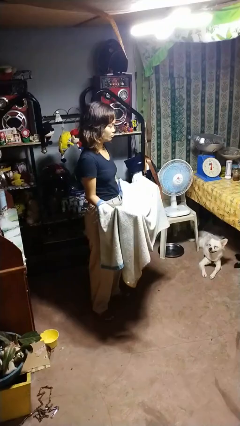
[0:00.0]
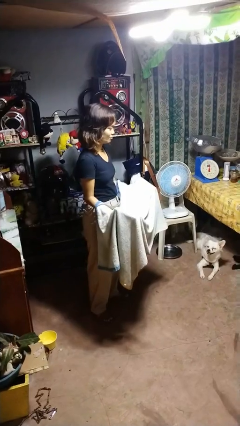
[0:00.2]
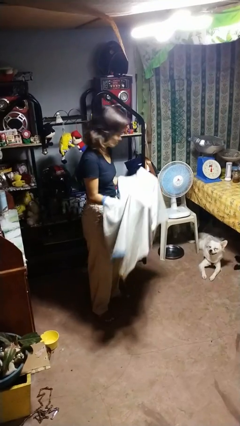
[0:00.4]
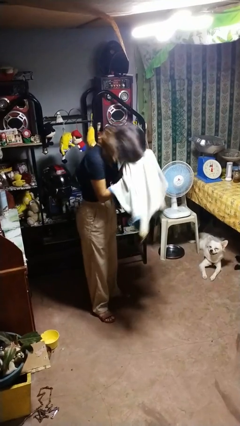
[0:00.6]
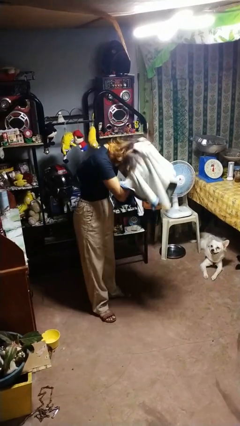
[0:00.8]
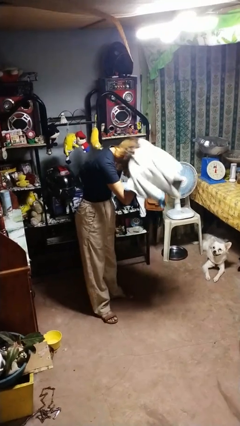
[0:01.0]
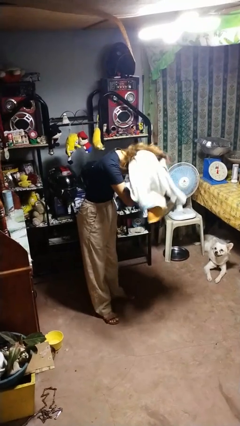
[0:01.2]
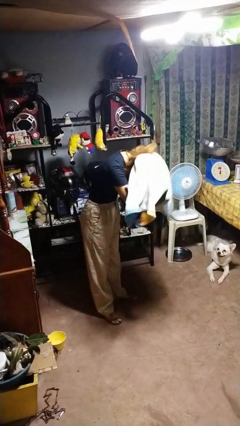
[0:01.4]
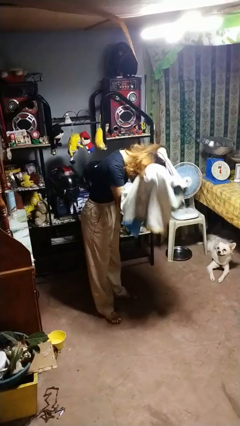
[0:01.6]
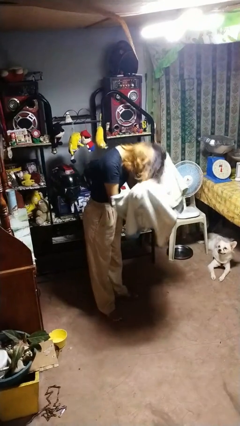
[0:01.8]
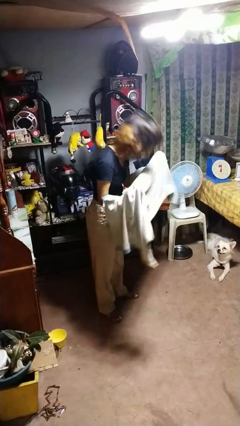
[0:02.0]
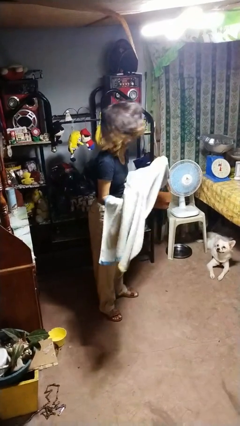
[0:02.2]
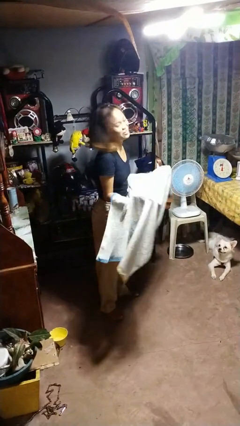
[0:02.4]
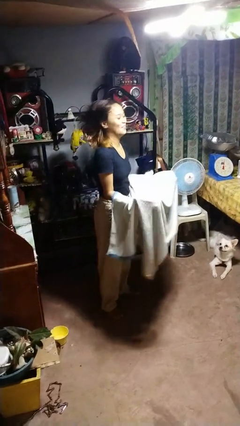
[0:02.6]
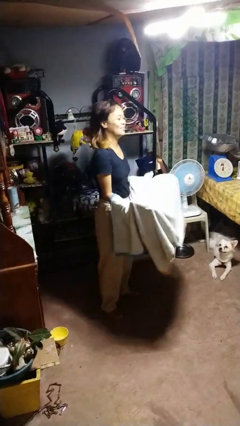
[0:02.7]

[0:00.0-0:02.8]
person dries hair with towel

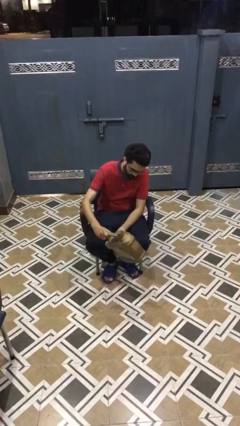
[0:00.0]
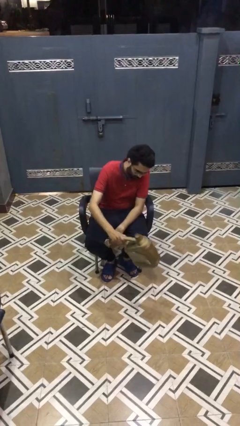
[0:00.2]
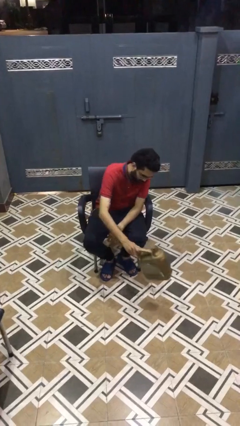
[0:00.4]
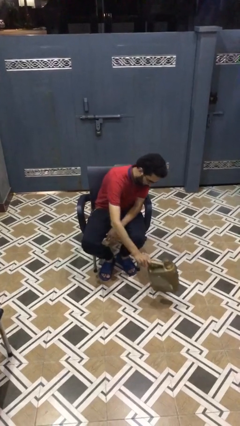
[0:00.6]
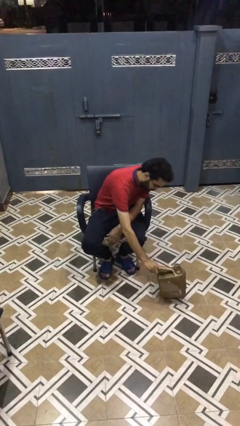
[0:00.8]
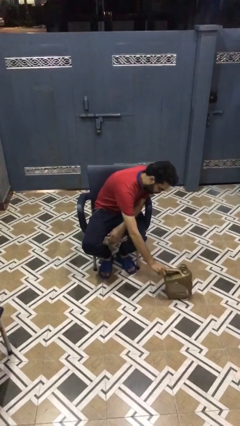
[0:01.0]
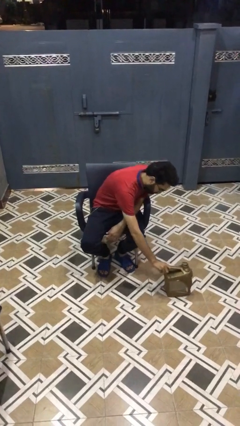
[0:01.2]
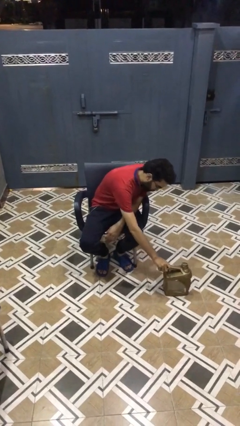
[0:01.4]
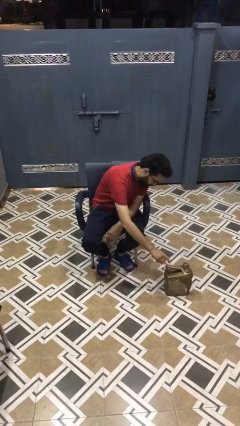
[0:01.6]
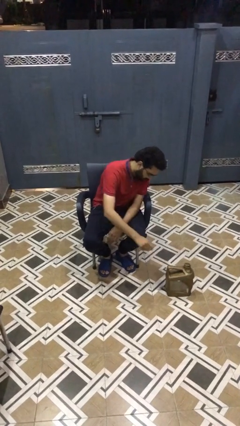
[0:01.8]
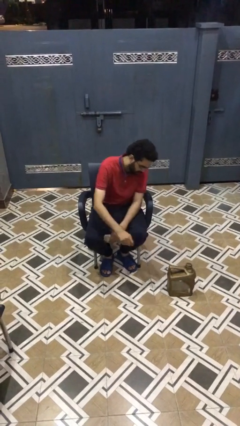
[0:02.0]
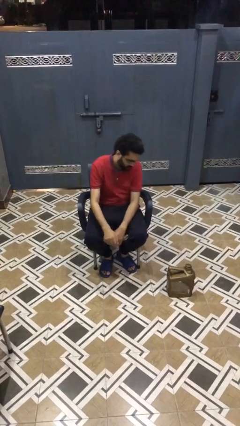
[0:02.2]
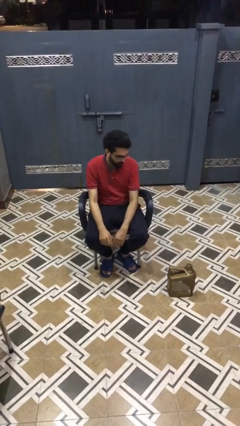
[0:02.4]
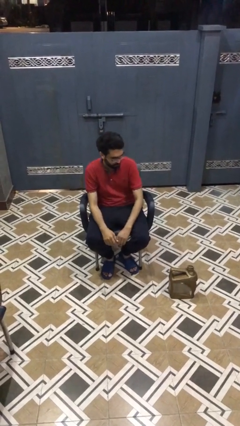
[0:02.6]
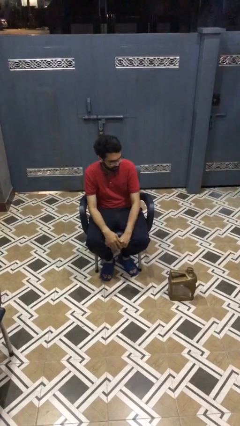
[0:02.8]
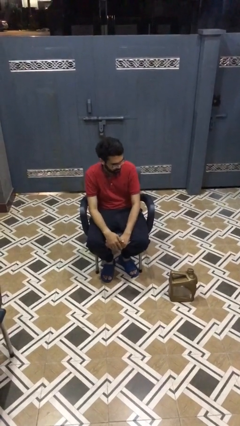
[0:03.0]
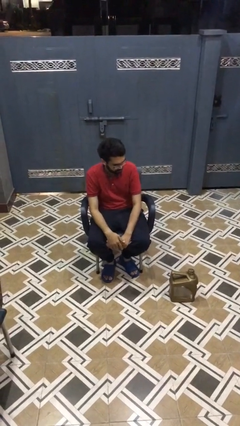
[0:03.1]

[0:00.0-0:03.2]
person puts down object on floor

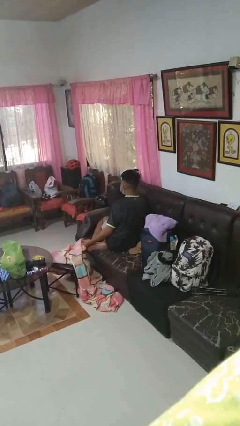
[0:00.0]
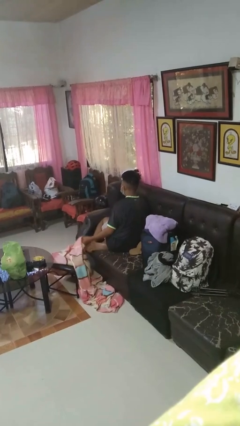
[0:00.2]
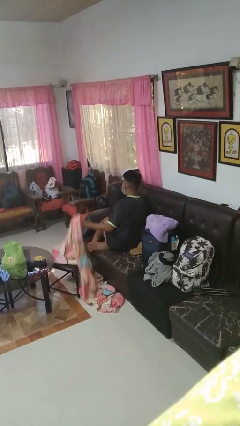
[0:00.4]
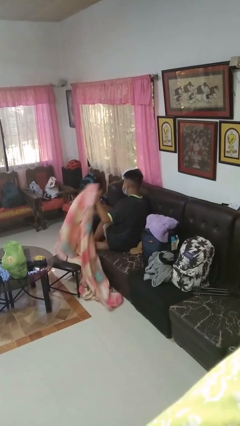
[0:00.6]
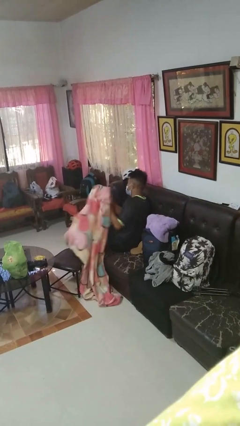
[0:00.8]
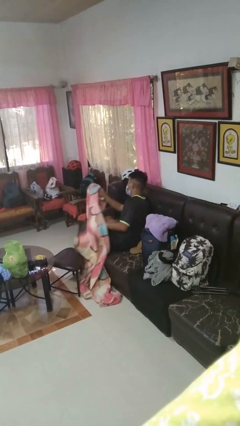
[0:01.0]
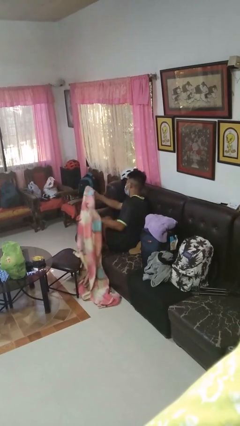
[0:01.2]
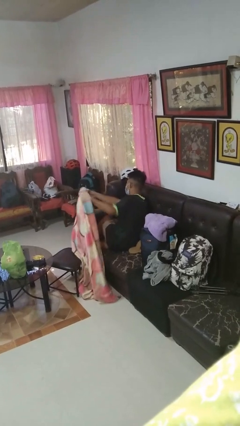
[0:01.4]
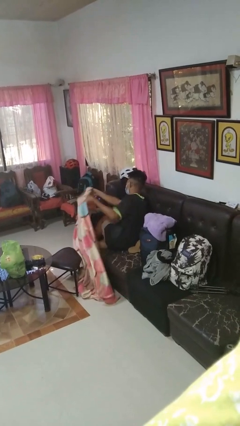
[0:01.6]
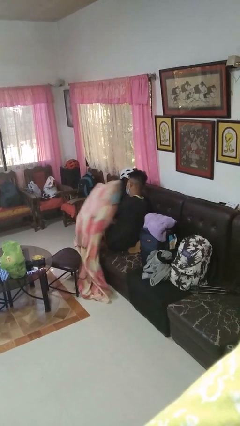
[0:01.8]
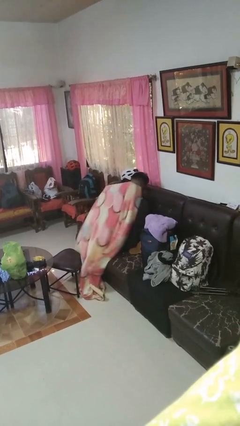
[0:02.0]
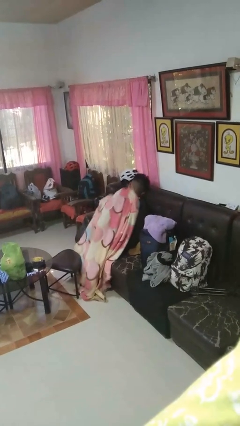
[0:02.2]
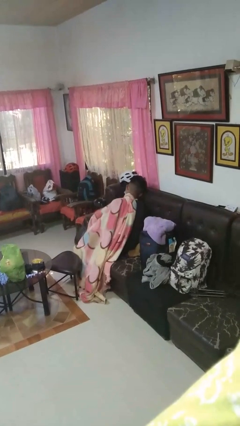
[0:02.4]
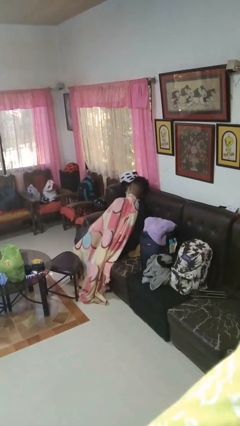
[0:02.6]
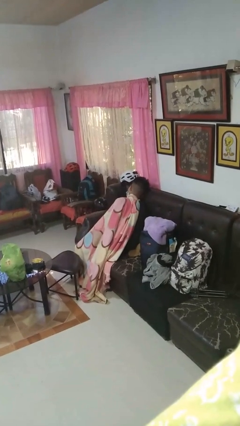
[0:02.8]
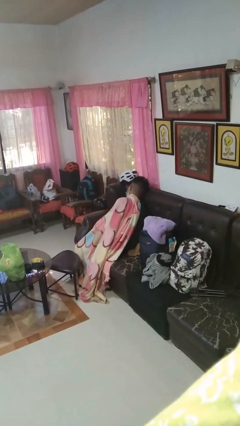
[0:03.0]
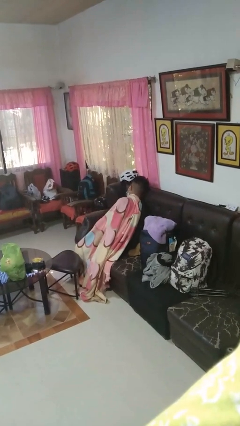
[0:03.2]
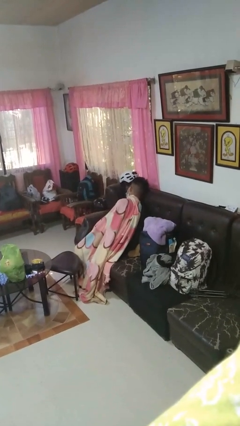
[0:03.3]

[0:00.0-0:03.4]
person covers with blanket

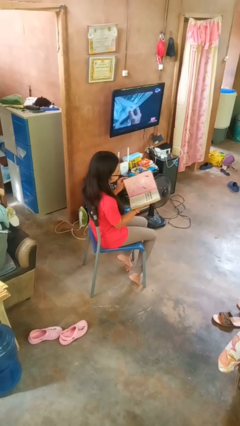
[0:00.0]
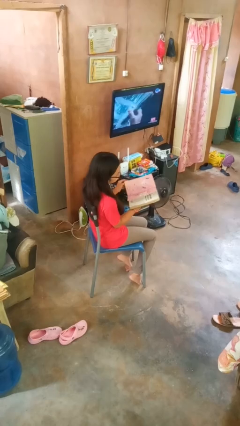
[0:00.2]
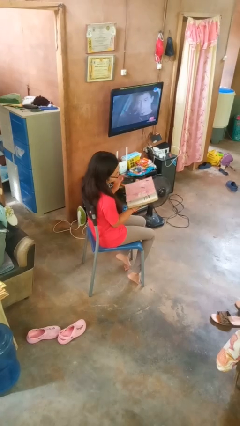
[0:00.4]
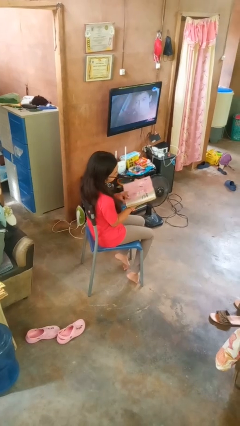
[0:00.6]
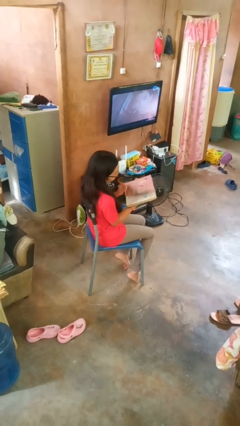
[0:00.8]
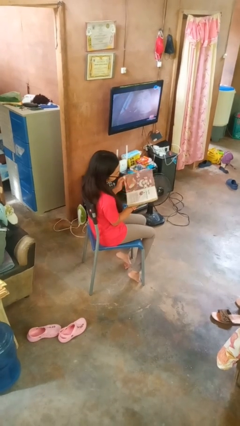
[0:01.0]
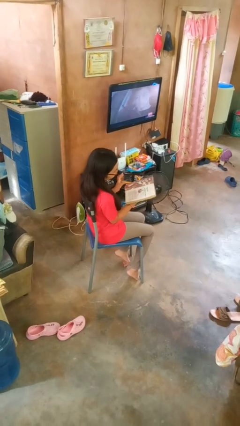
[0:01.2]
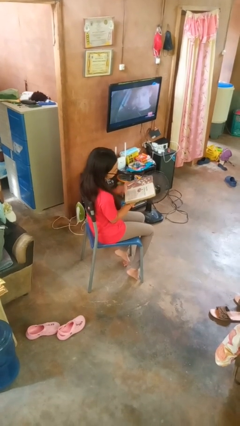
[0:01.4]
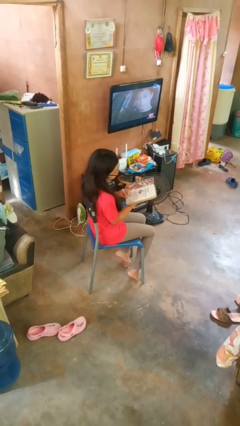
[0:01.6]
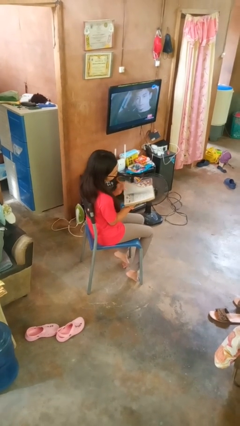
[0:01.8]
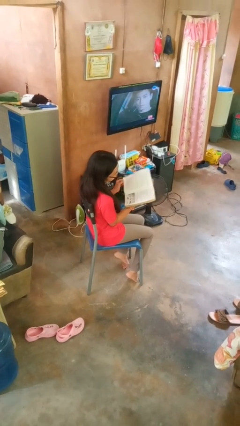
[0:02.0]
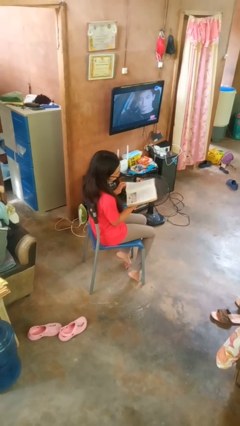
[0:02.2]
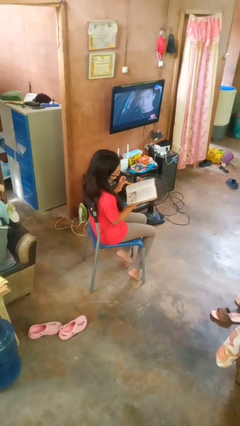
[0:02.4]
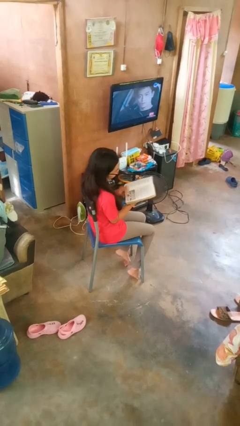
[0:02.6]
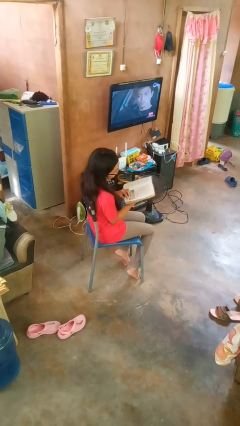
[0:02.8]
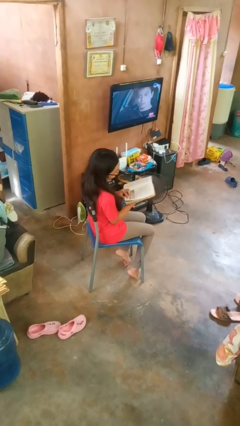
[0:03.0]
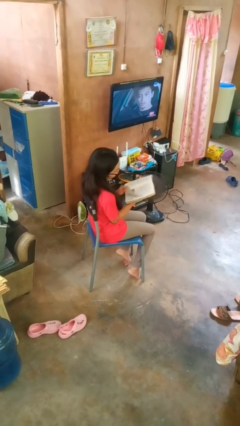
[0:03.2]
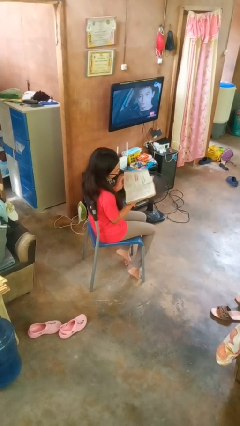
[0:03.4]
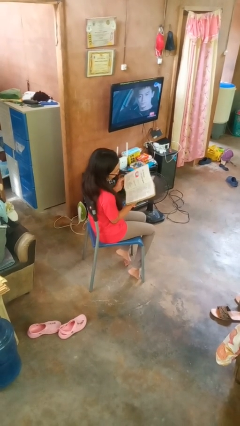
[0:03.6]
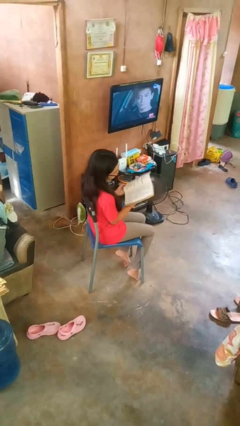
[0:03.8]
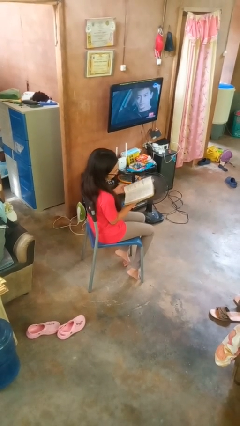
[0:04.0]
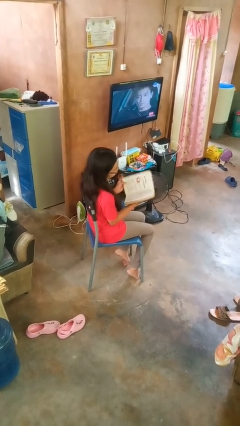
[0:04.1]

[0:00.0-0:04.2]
person reads book

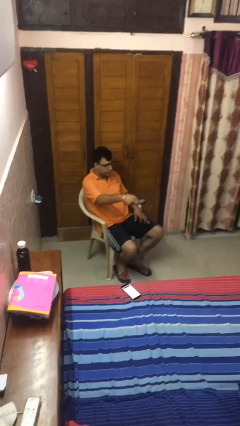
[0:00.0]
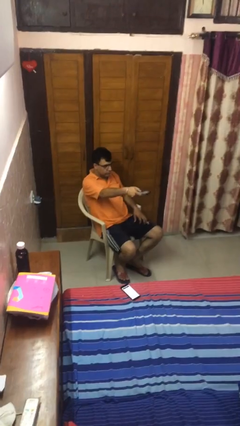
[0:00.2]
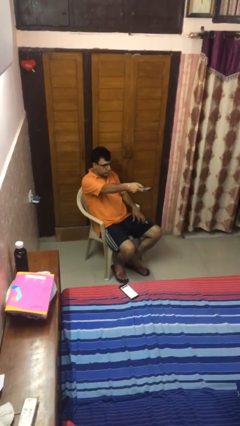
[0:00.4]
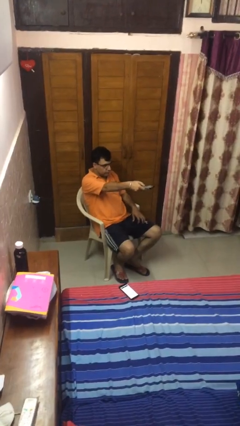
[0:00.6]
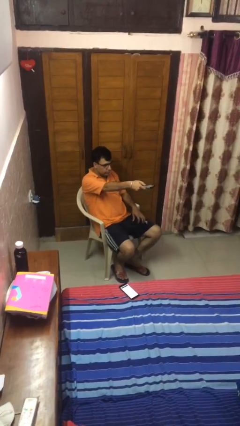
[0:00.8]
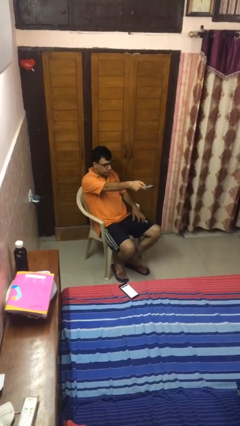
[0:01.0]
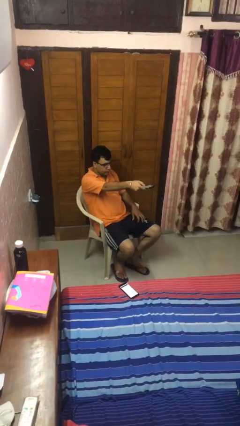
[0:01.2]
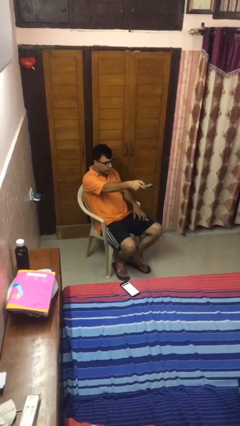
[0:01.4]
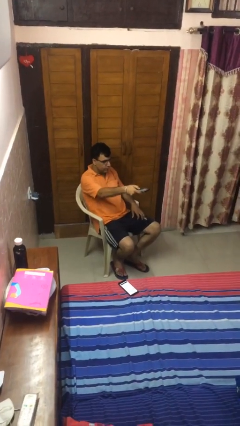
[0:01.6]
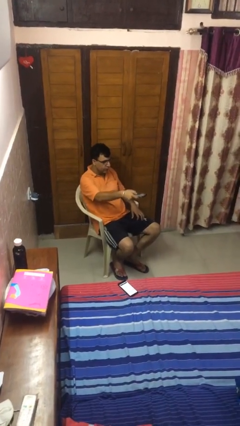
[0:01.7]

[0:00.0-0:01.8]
person uses television remote

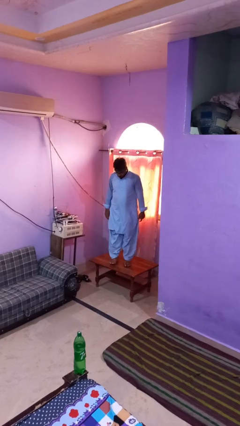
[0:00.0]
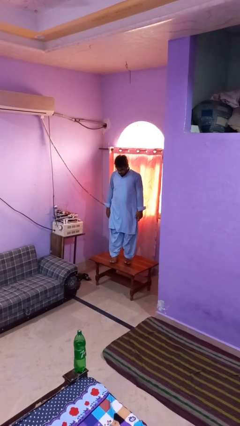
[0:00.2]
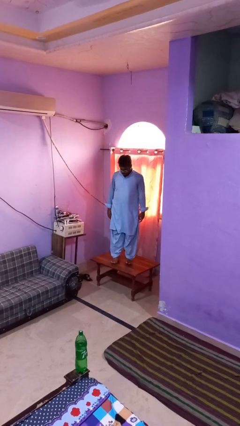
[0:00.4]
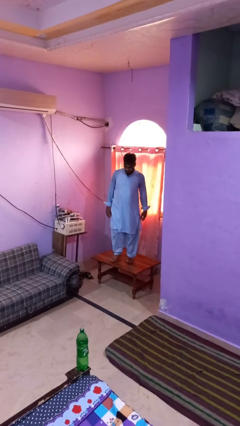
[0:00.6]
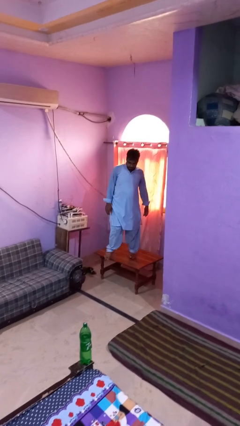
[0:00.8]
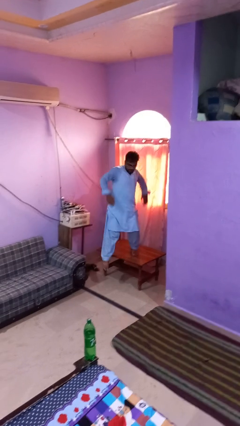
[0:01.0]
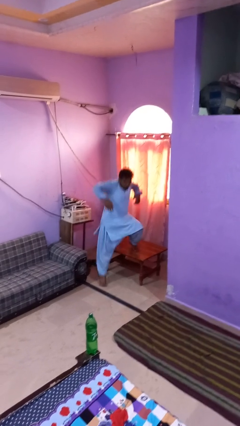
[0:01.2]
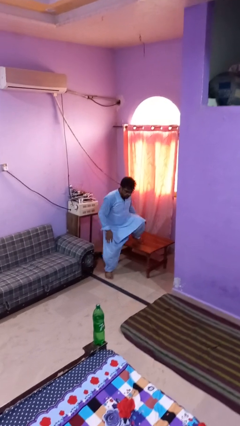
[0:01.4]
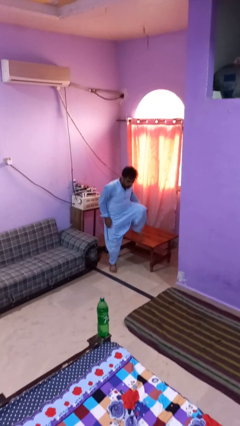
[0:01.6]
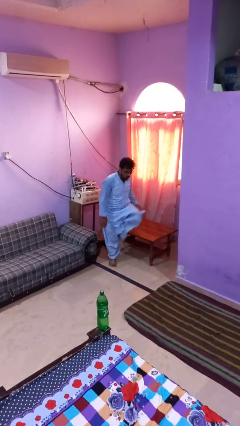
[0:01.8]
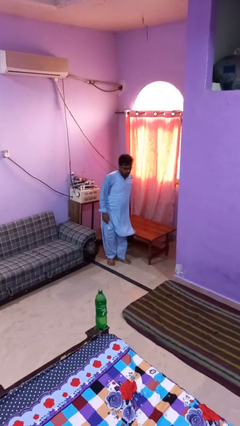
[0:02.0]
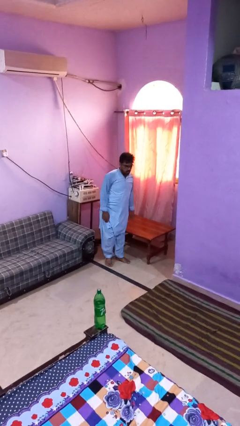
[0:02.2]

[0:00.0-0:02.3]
person climbs off table
